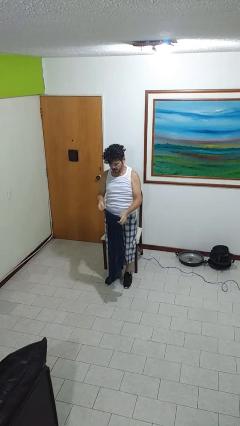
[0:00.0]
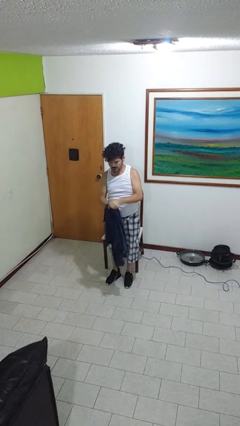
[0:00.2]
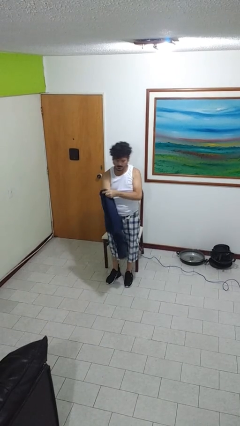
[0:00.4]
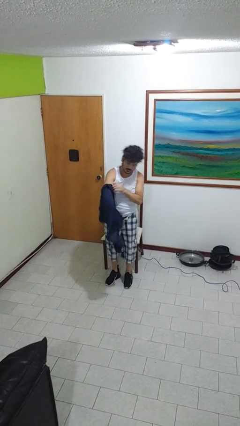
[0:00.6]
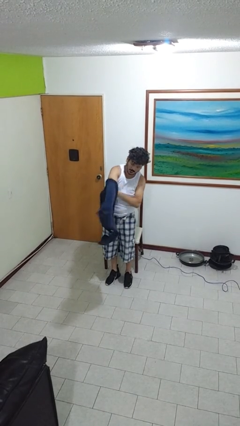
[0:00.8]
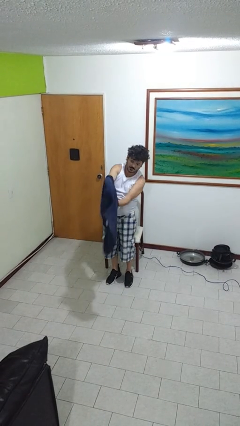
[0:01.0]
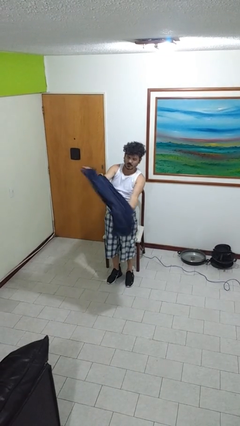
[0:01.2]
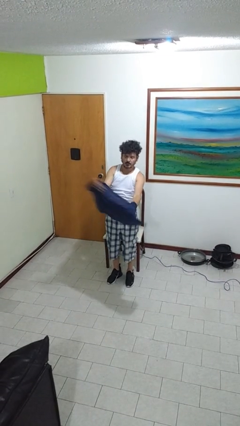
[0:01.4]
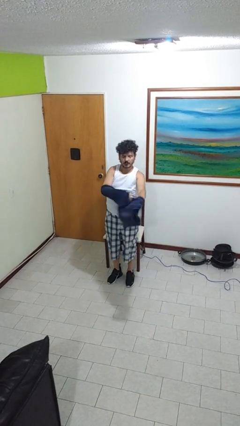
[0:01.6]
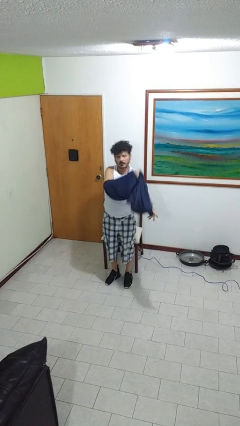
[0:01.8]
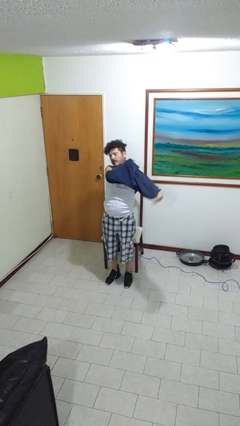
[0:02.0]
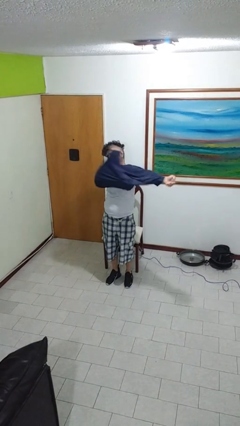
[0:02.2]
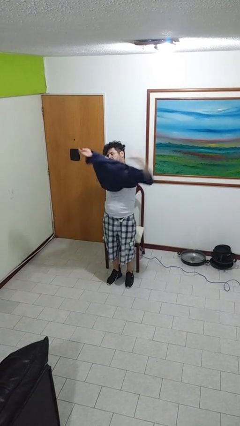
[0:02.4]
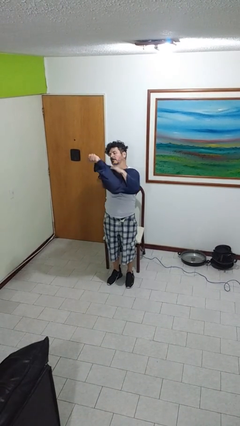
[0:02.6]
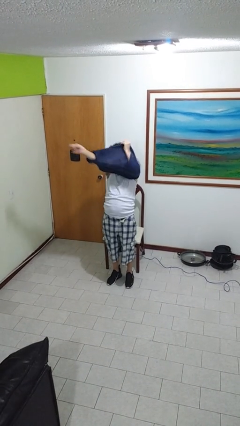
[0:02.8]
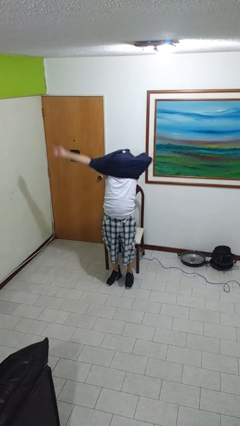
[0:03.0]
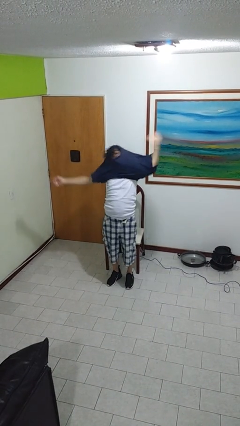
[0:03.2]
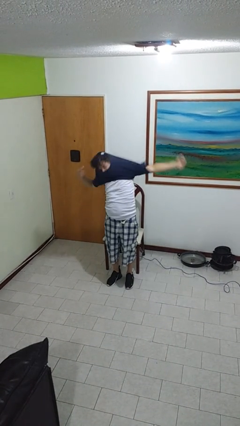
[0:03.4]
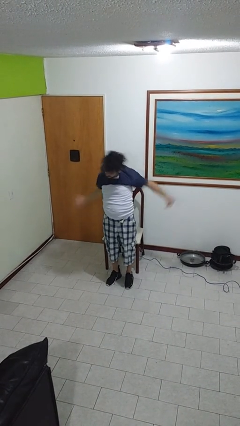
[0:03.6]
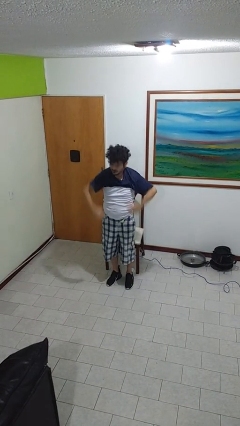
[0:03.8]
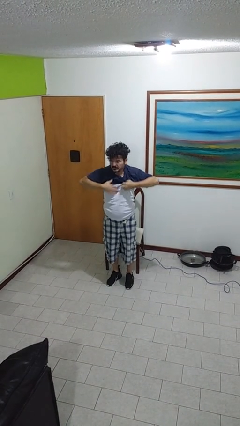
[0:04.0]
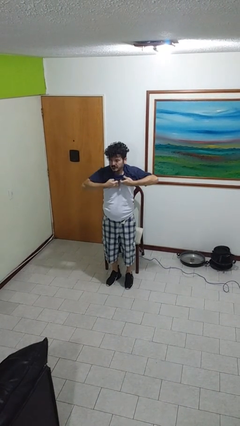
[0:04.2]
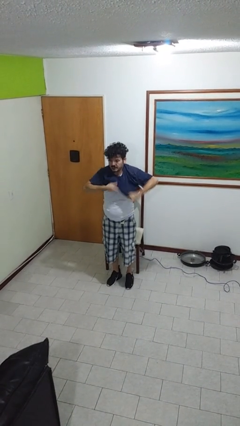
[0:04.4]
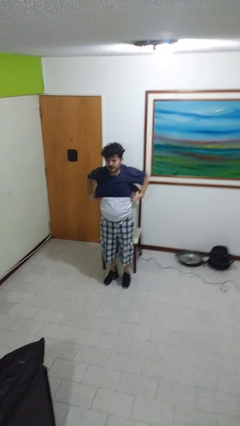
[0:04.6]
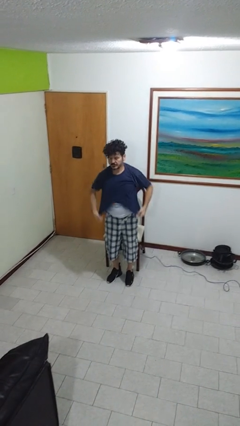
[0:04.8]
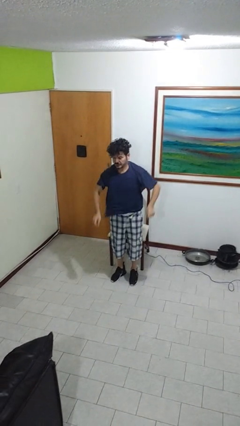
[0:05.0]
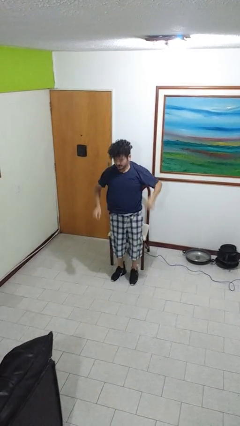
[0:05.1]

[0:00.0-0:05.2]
person puts on shirt

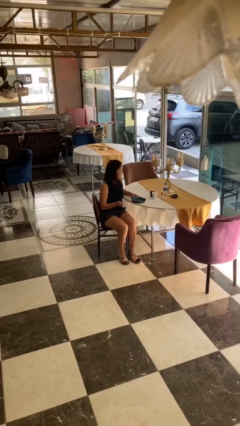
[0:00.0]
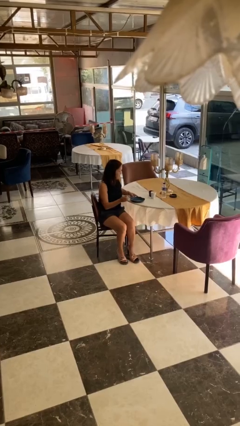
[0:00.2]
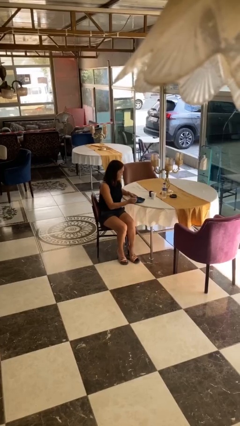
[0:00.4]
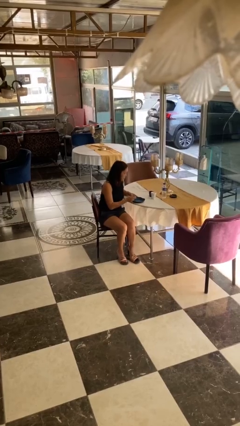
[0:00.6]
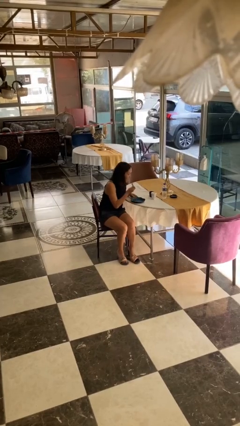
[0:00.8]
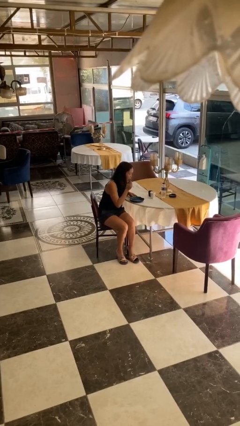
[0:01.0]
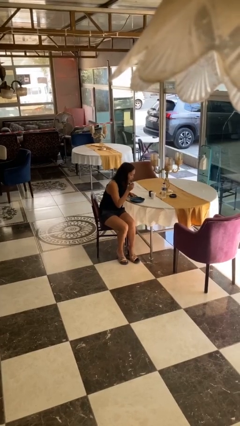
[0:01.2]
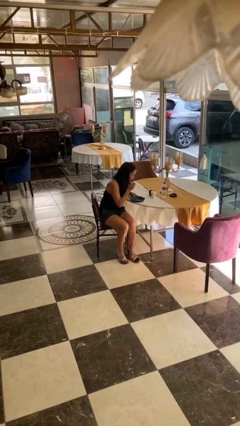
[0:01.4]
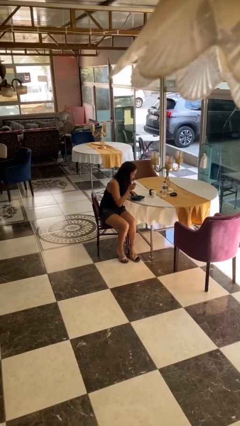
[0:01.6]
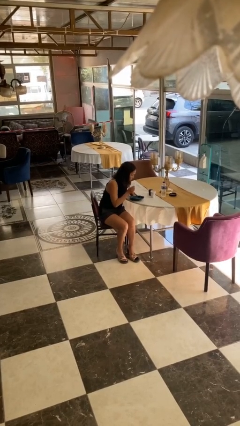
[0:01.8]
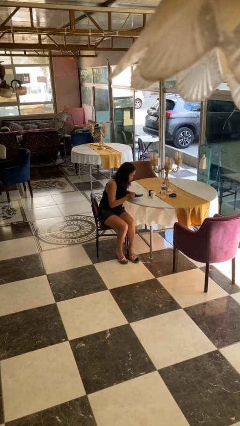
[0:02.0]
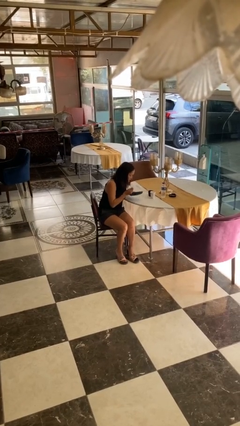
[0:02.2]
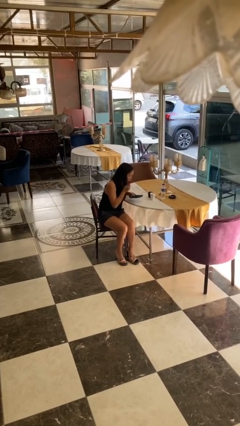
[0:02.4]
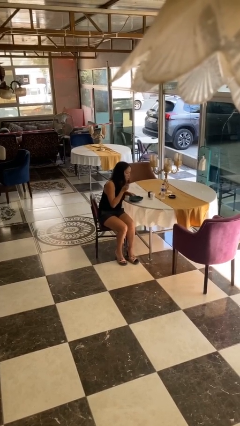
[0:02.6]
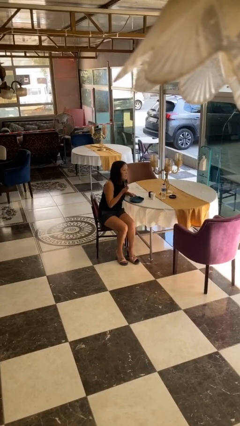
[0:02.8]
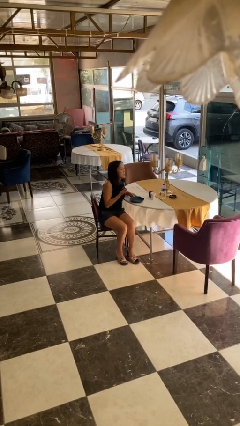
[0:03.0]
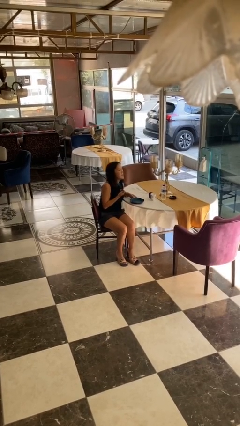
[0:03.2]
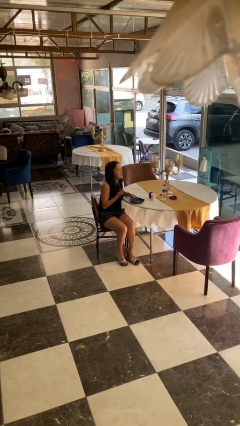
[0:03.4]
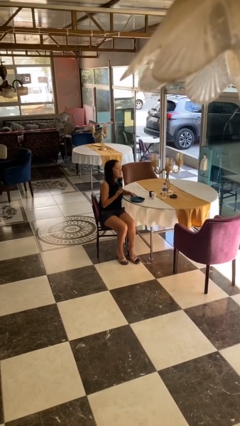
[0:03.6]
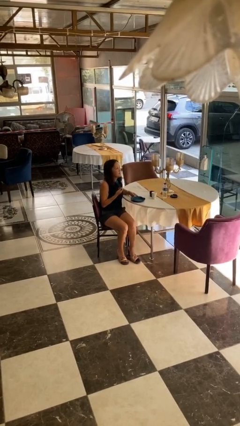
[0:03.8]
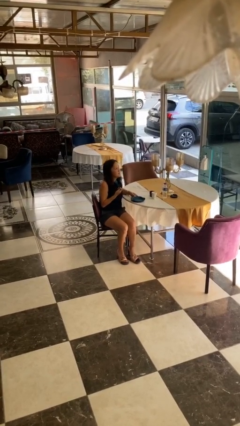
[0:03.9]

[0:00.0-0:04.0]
person eats with utensil

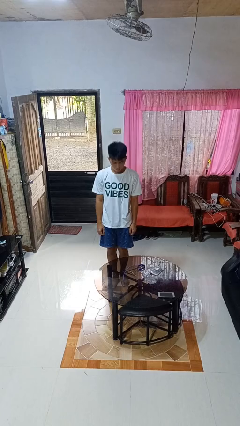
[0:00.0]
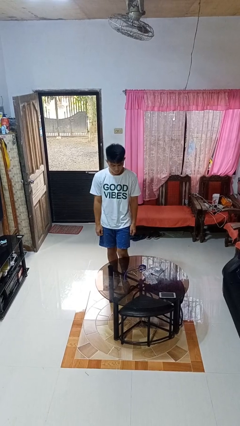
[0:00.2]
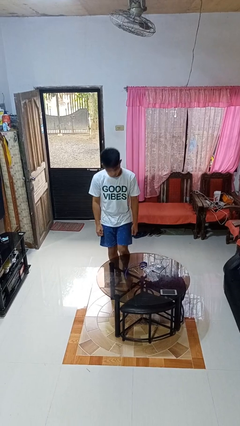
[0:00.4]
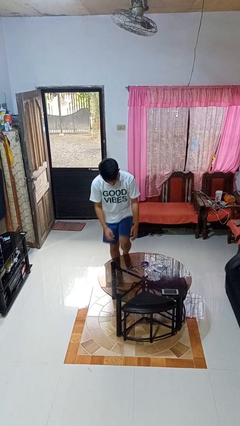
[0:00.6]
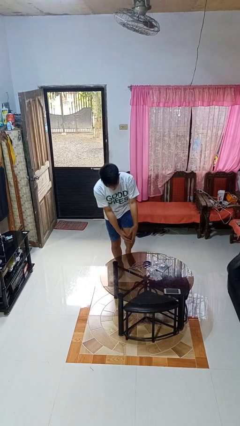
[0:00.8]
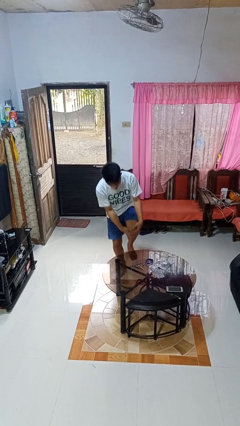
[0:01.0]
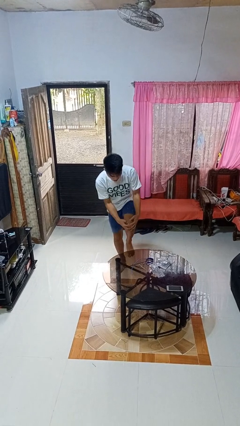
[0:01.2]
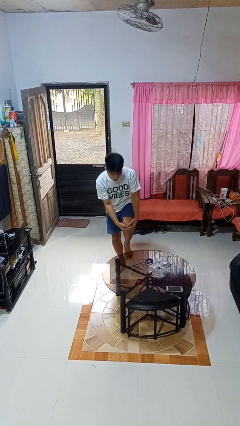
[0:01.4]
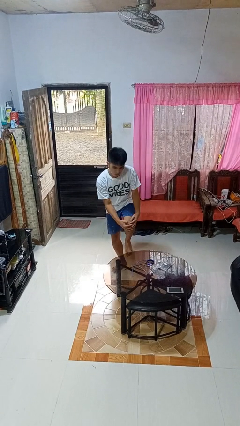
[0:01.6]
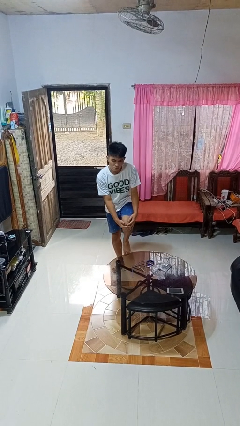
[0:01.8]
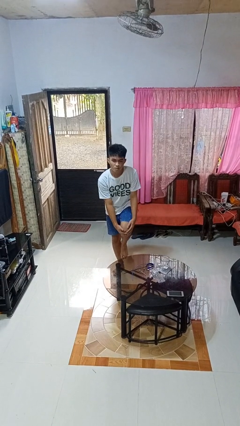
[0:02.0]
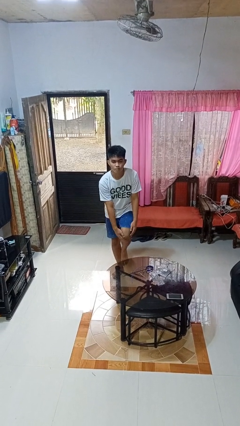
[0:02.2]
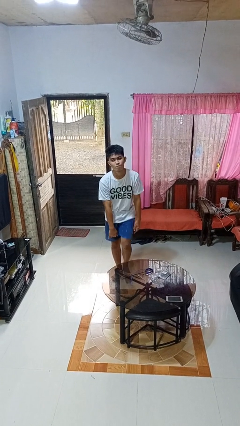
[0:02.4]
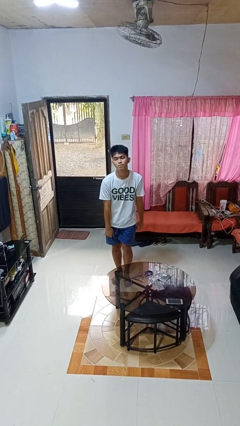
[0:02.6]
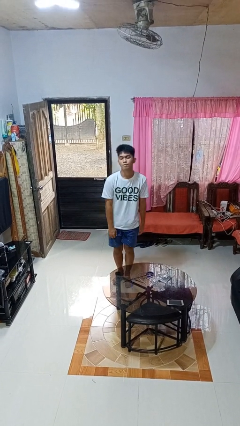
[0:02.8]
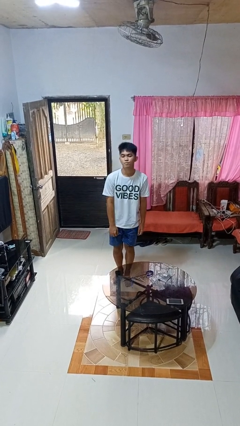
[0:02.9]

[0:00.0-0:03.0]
person bumps into table

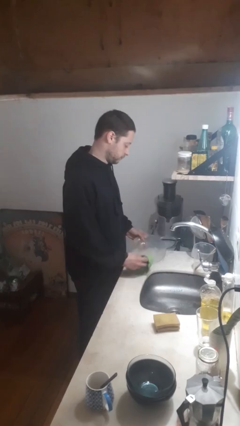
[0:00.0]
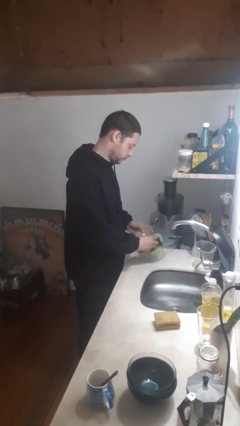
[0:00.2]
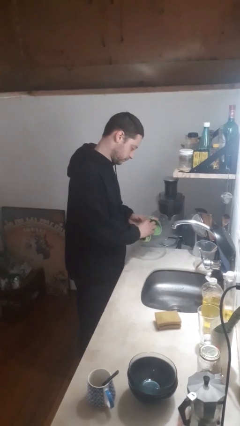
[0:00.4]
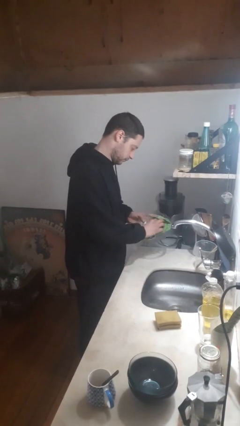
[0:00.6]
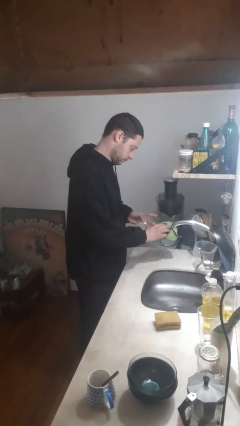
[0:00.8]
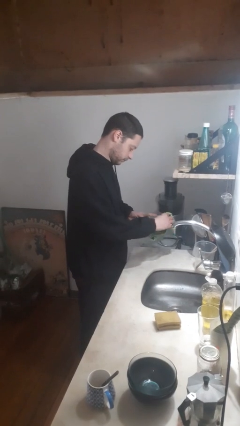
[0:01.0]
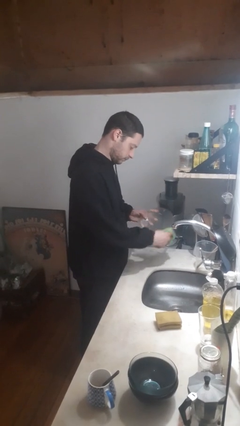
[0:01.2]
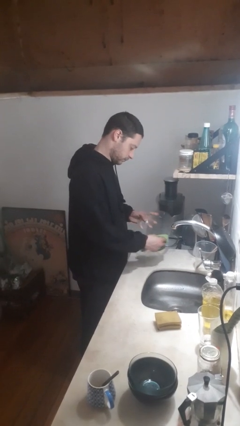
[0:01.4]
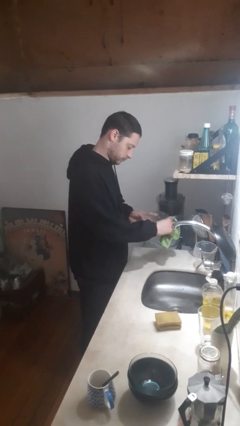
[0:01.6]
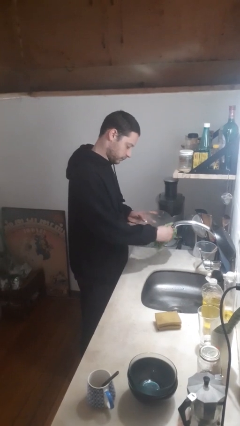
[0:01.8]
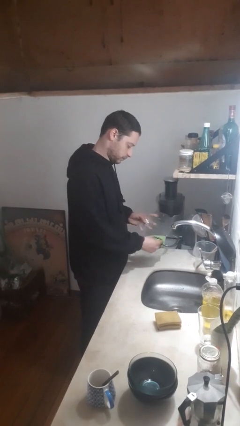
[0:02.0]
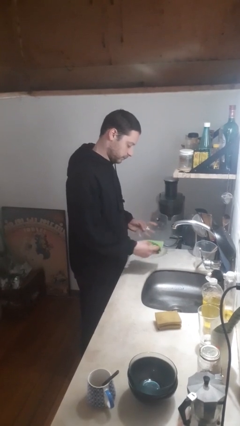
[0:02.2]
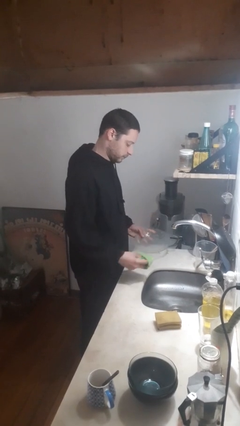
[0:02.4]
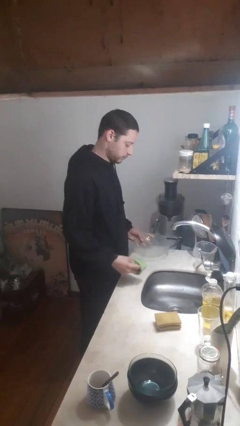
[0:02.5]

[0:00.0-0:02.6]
person dries dish

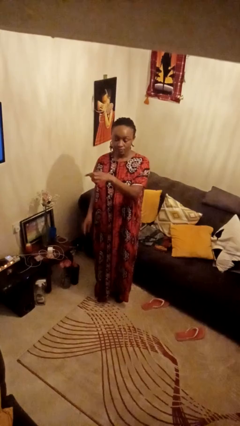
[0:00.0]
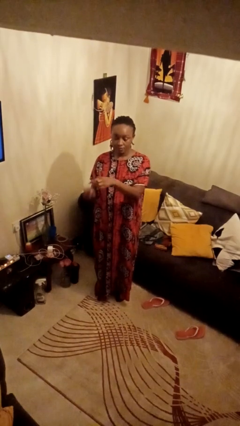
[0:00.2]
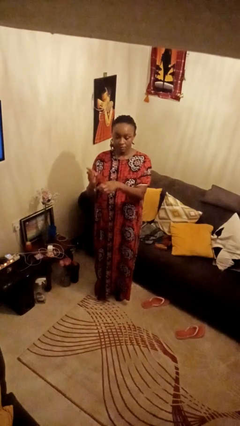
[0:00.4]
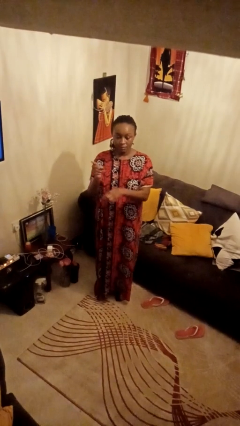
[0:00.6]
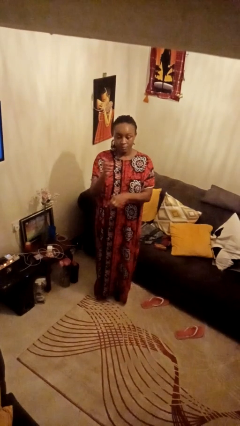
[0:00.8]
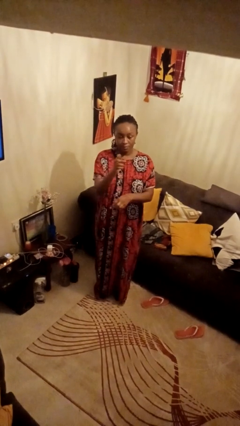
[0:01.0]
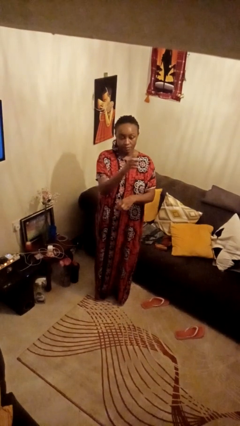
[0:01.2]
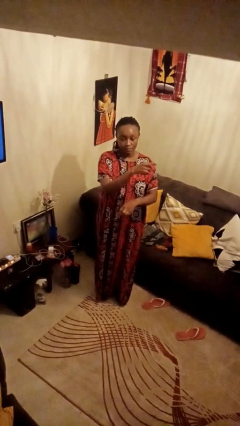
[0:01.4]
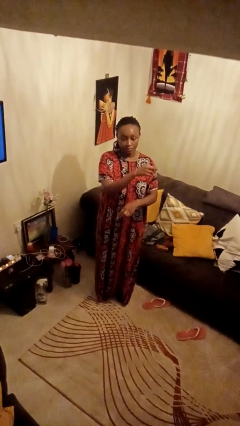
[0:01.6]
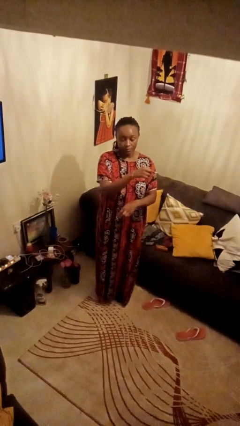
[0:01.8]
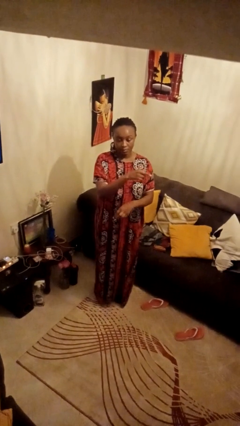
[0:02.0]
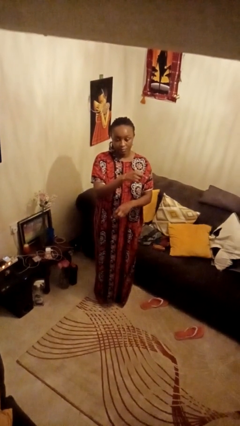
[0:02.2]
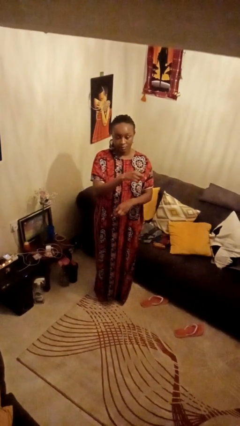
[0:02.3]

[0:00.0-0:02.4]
person gestures swipe right

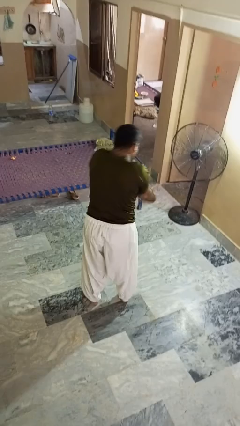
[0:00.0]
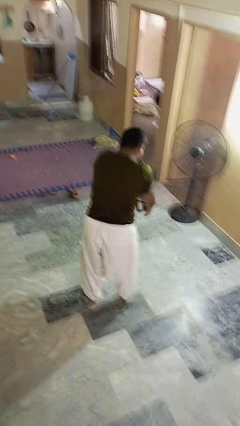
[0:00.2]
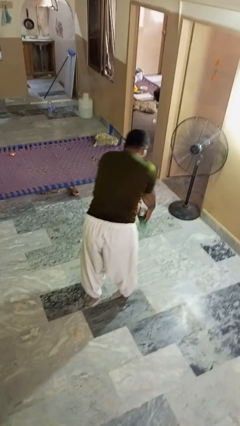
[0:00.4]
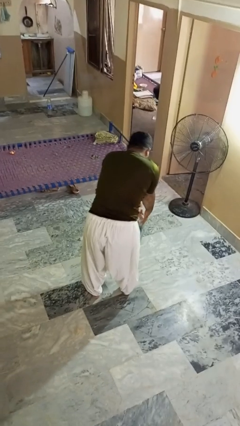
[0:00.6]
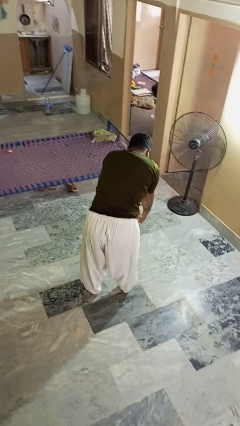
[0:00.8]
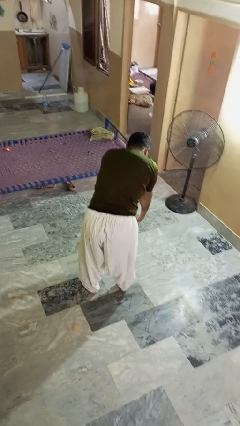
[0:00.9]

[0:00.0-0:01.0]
person catches dropped object
